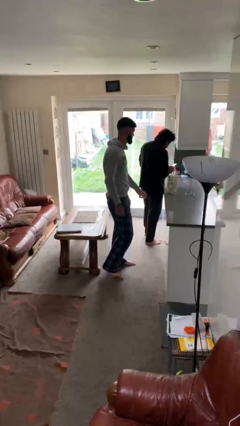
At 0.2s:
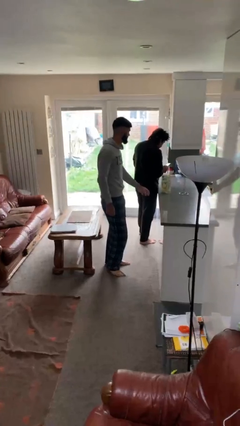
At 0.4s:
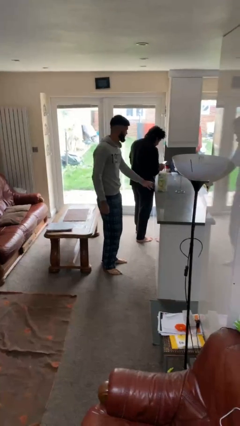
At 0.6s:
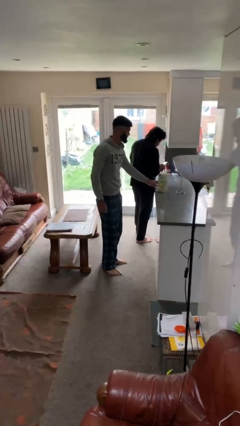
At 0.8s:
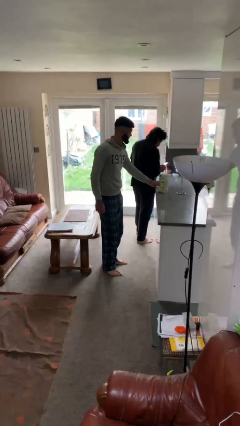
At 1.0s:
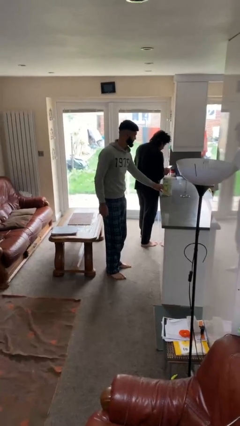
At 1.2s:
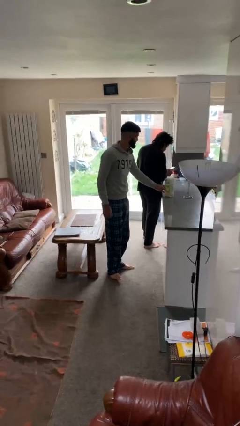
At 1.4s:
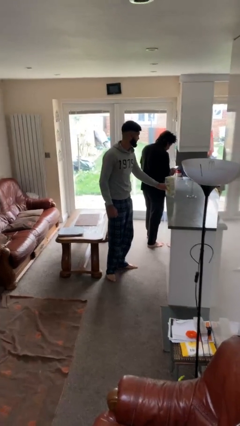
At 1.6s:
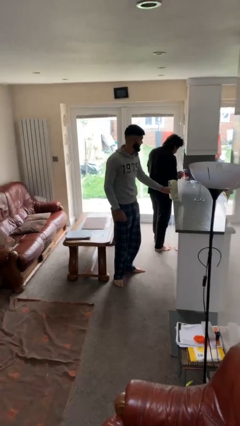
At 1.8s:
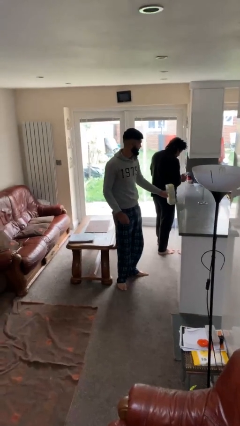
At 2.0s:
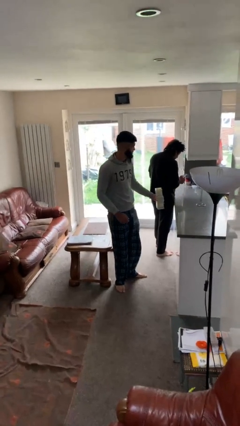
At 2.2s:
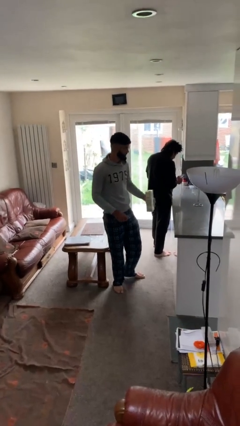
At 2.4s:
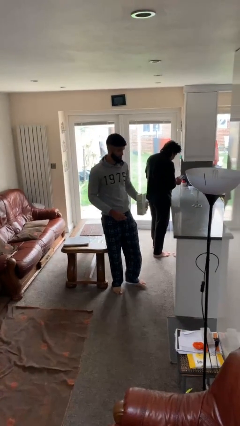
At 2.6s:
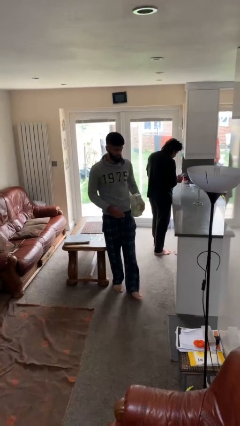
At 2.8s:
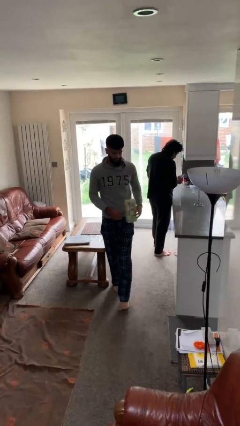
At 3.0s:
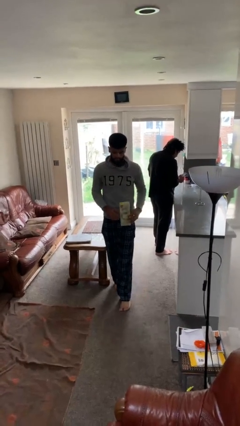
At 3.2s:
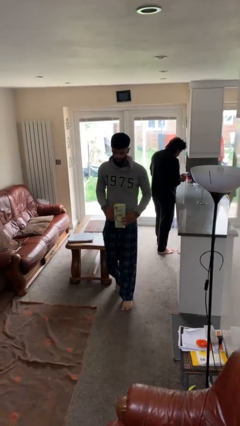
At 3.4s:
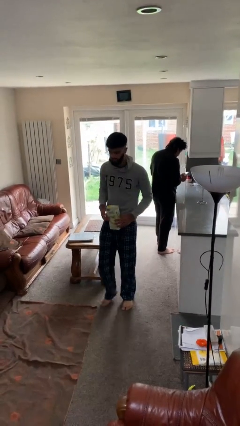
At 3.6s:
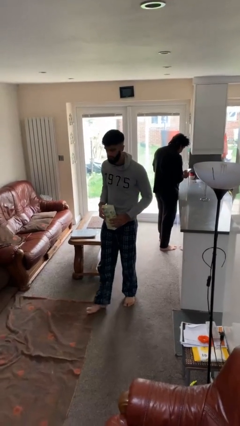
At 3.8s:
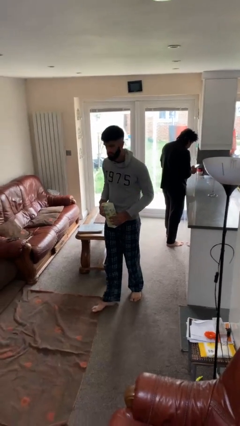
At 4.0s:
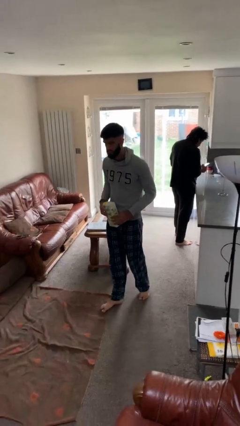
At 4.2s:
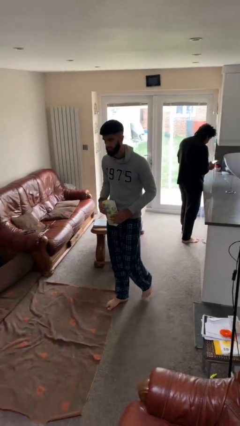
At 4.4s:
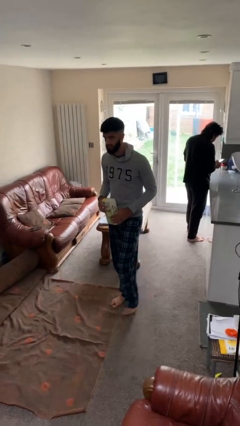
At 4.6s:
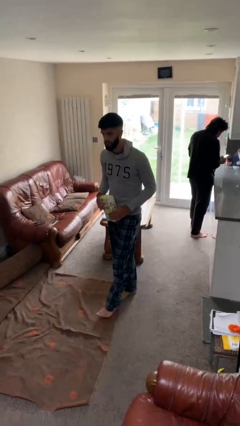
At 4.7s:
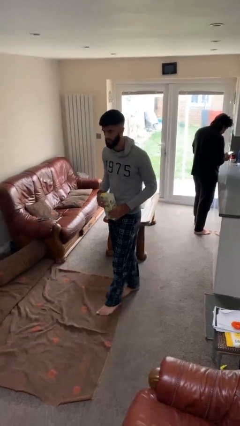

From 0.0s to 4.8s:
person steals object from person

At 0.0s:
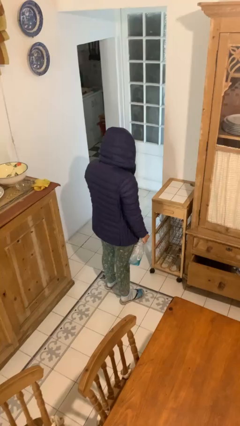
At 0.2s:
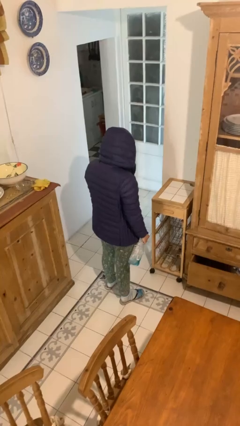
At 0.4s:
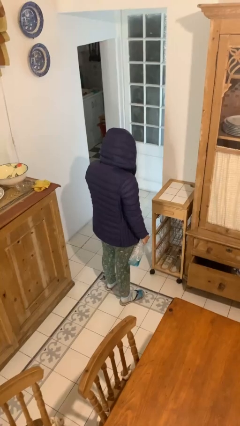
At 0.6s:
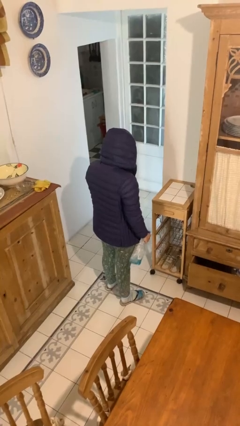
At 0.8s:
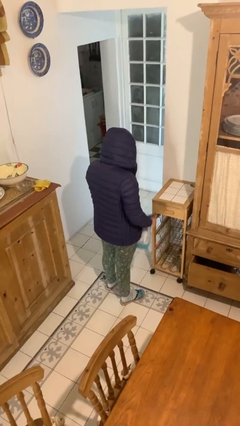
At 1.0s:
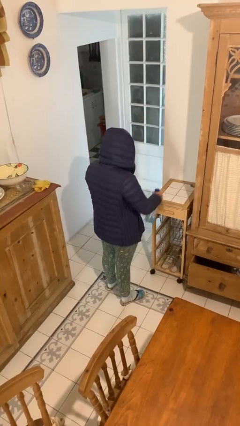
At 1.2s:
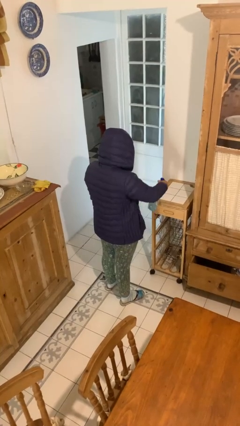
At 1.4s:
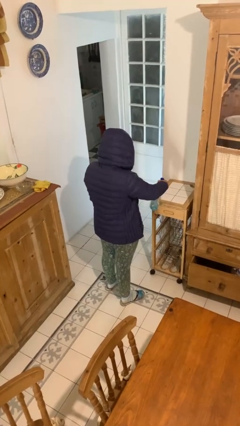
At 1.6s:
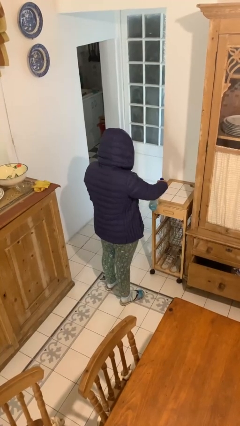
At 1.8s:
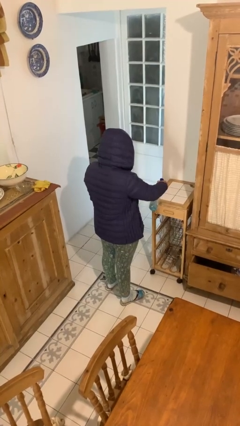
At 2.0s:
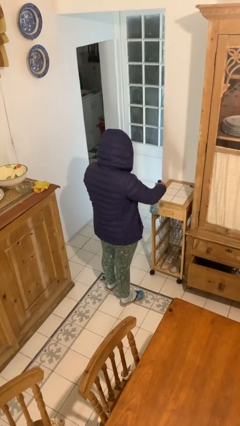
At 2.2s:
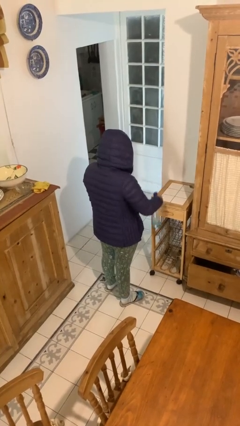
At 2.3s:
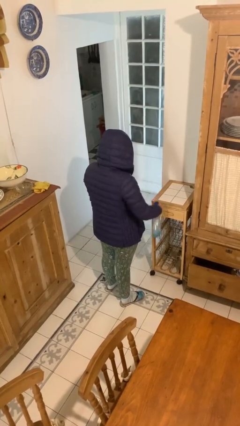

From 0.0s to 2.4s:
person sprays from bottle

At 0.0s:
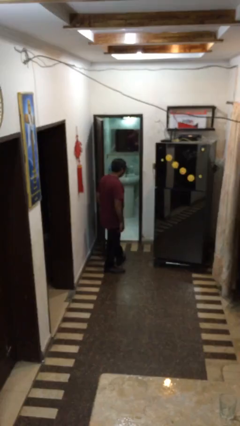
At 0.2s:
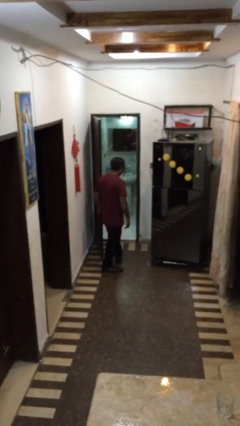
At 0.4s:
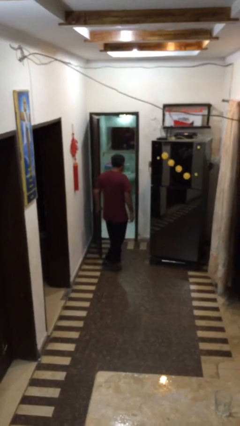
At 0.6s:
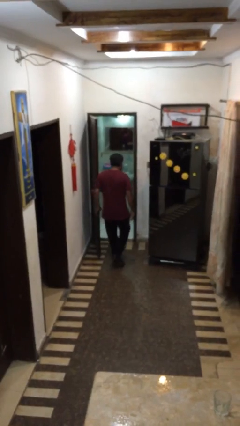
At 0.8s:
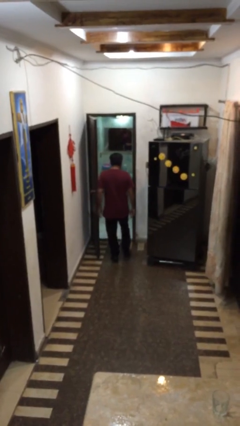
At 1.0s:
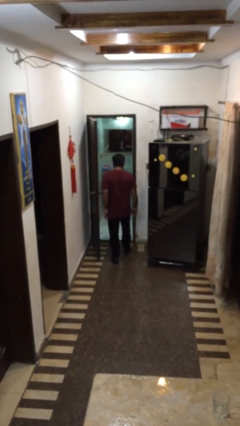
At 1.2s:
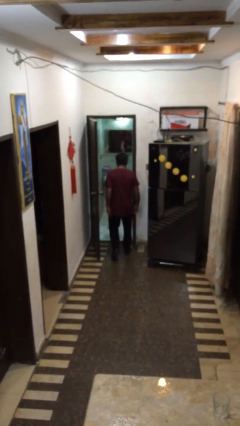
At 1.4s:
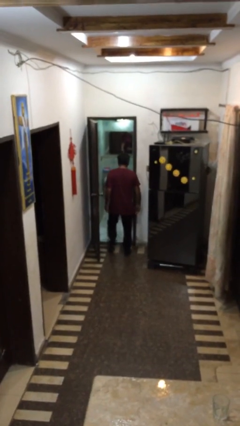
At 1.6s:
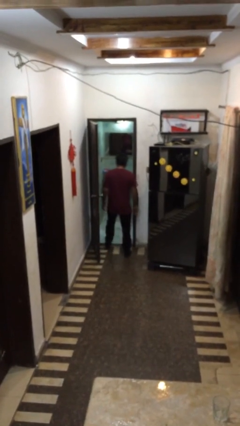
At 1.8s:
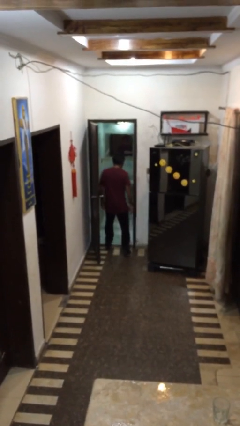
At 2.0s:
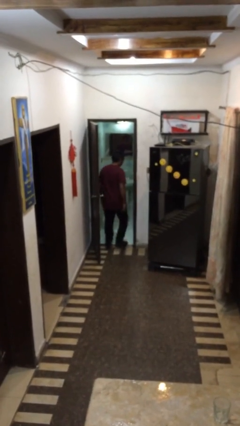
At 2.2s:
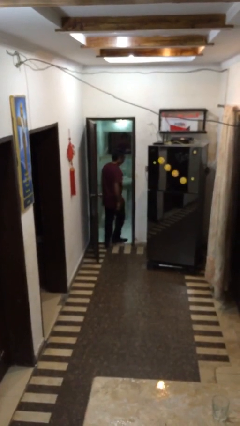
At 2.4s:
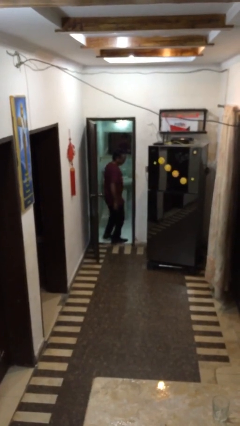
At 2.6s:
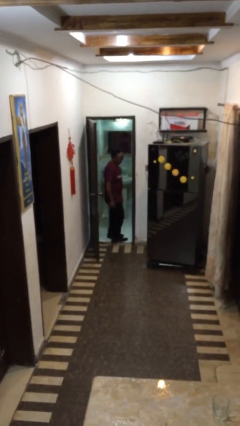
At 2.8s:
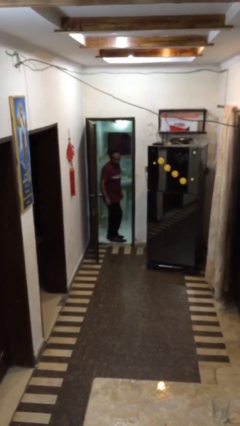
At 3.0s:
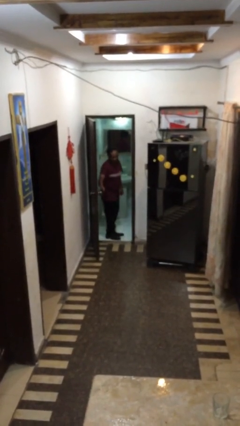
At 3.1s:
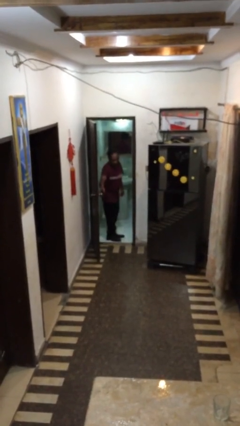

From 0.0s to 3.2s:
person exits scene through structure

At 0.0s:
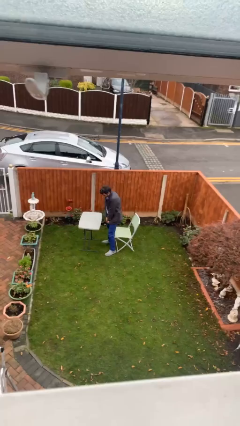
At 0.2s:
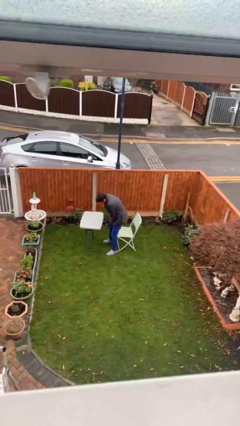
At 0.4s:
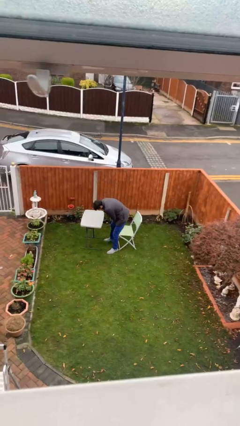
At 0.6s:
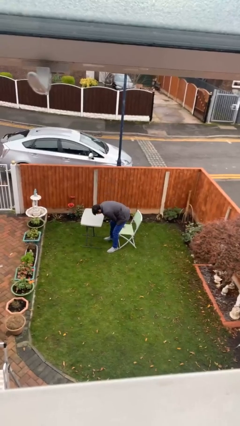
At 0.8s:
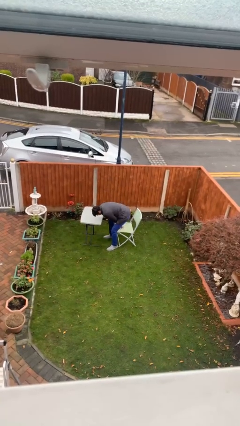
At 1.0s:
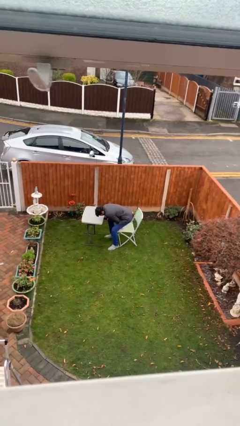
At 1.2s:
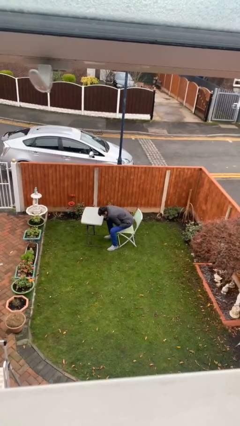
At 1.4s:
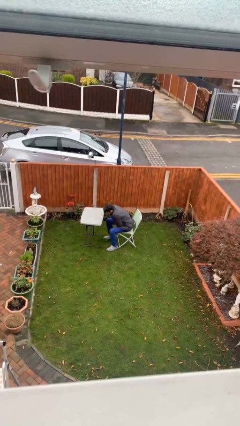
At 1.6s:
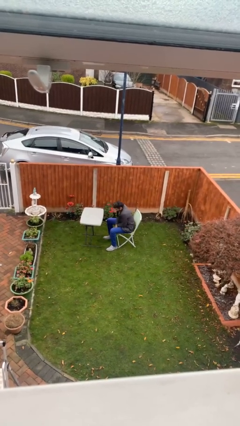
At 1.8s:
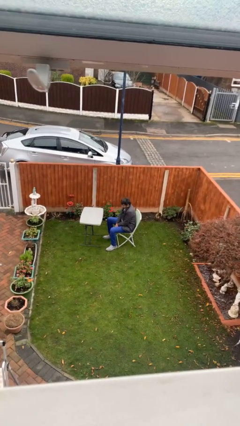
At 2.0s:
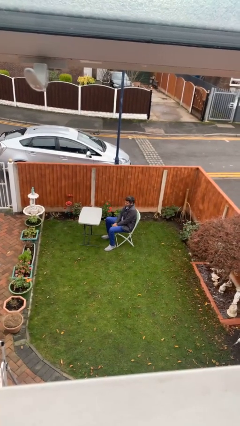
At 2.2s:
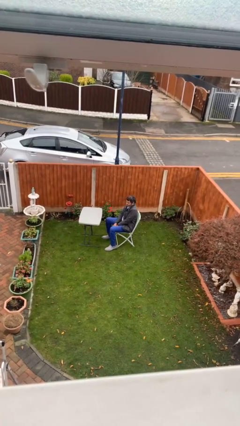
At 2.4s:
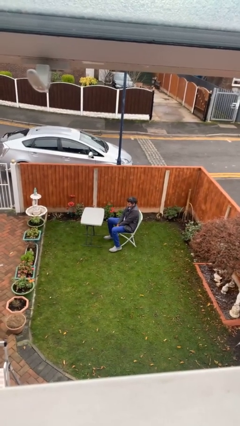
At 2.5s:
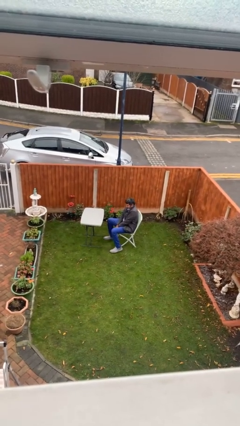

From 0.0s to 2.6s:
person sits down

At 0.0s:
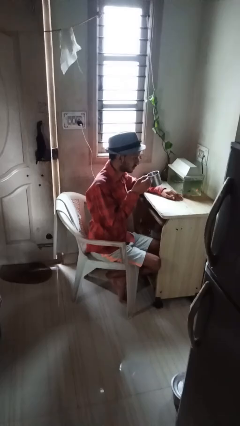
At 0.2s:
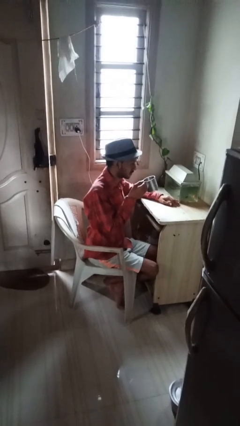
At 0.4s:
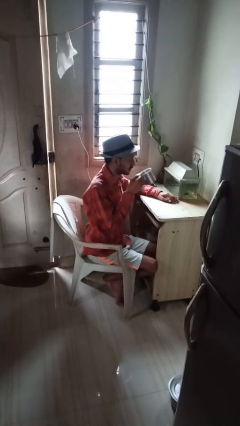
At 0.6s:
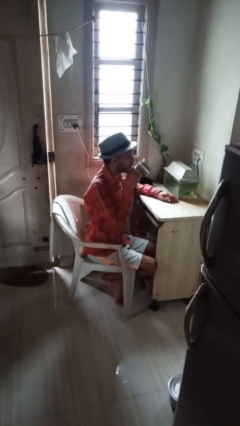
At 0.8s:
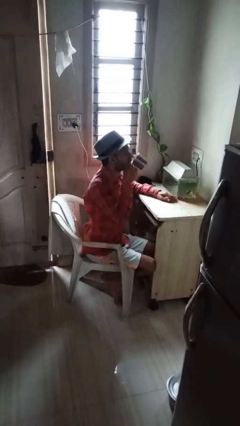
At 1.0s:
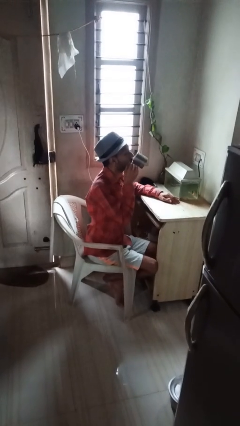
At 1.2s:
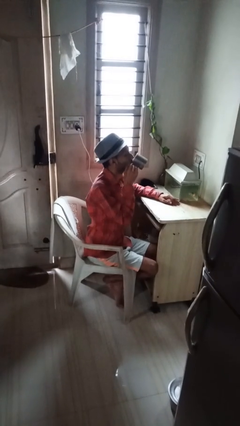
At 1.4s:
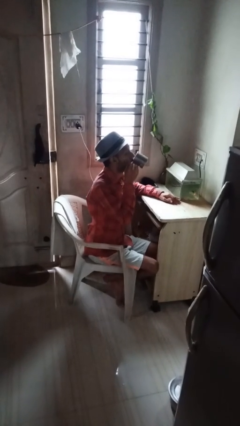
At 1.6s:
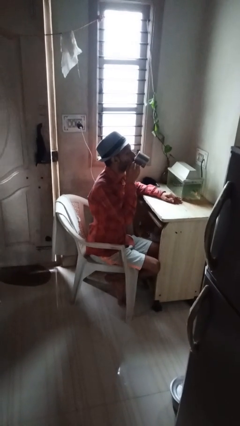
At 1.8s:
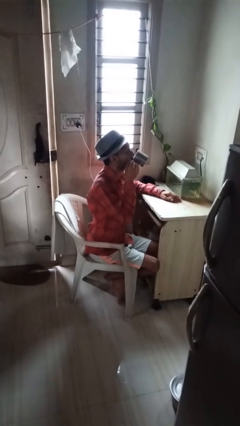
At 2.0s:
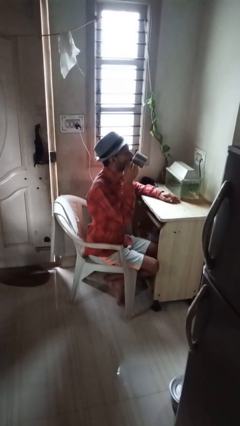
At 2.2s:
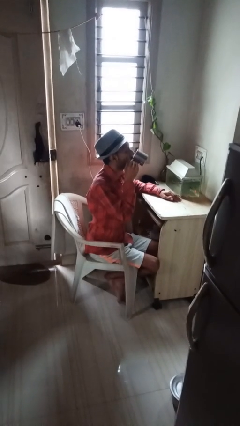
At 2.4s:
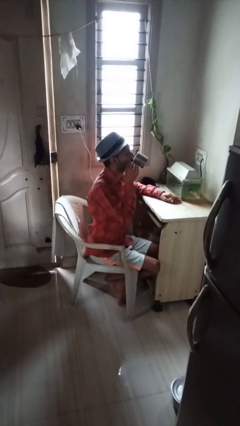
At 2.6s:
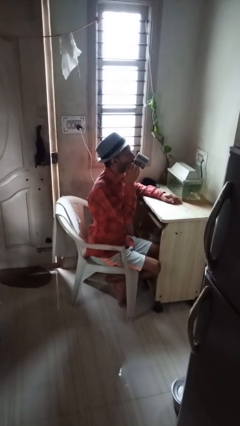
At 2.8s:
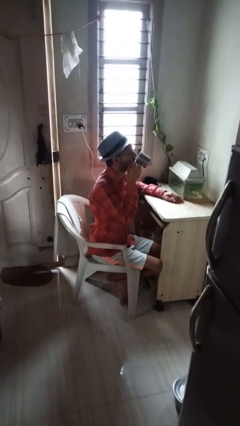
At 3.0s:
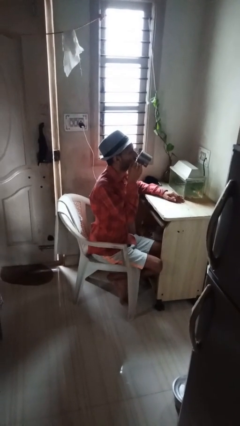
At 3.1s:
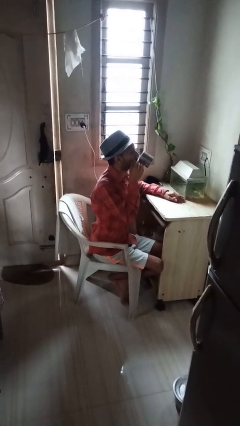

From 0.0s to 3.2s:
person drinks from mug

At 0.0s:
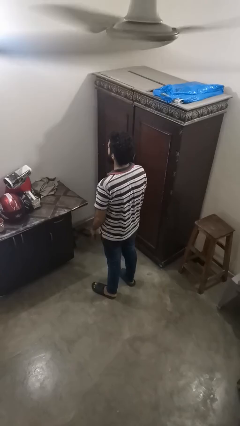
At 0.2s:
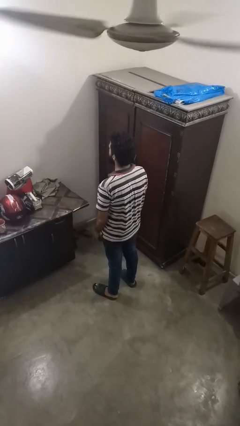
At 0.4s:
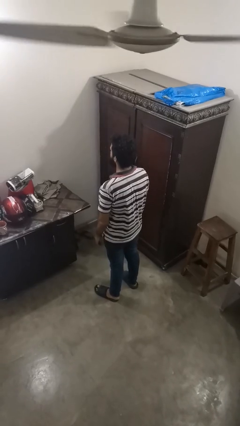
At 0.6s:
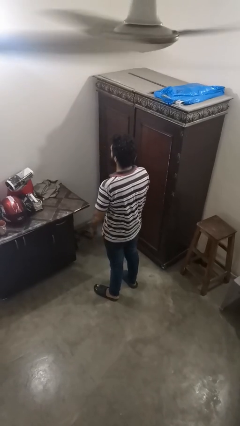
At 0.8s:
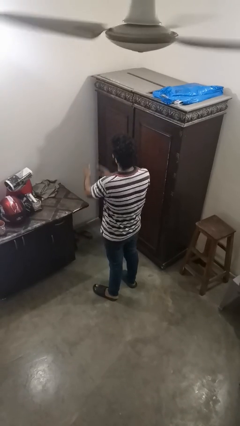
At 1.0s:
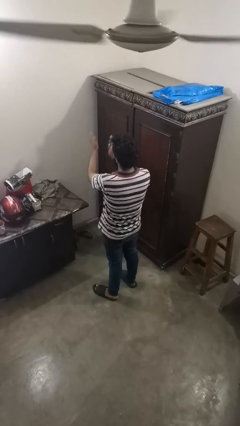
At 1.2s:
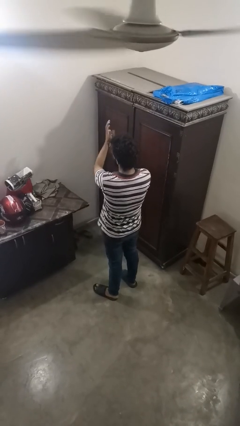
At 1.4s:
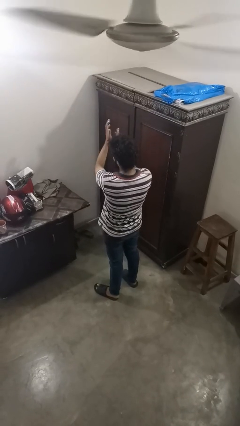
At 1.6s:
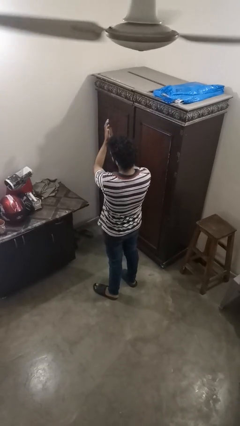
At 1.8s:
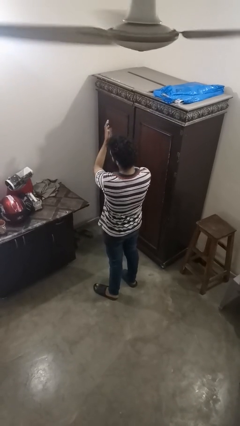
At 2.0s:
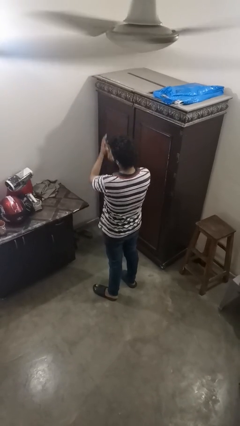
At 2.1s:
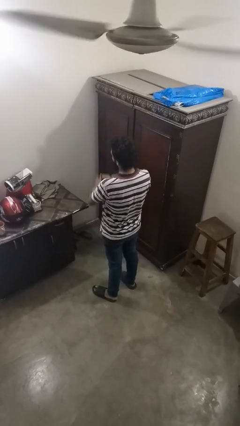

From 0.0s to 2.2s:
person claps hands
